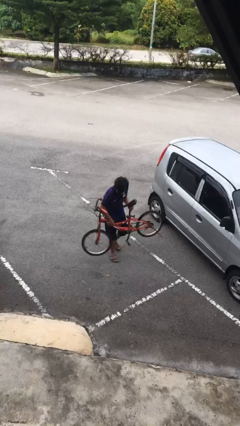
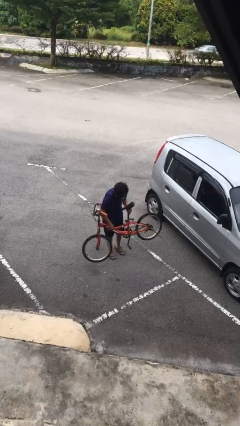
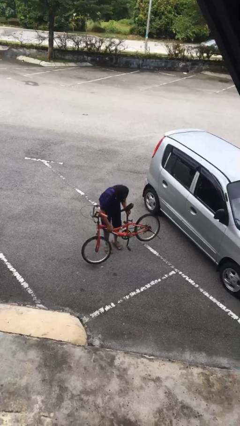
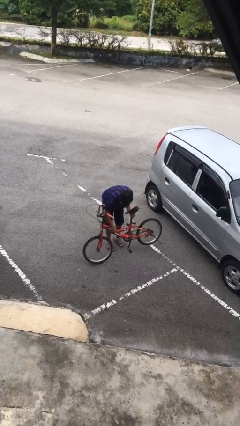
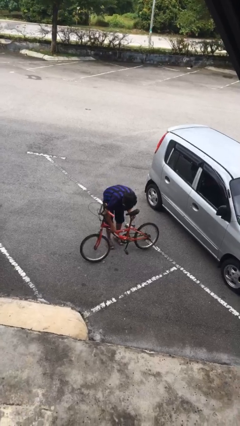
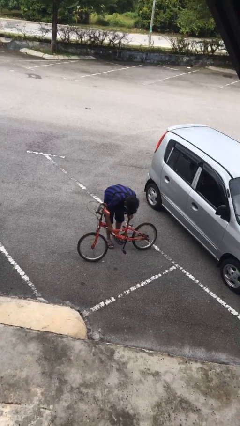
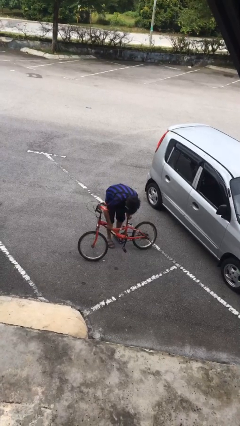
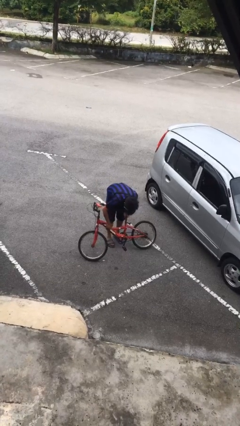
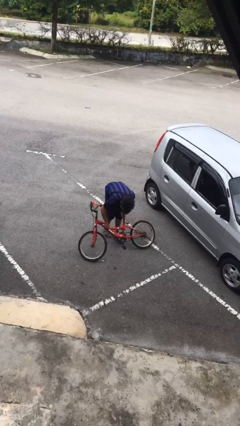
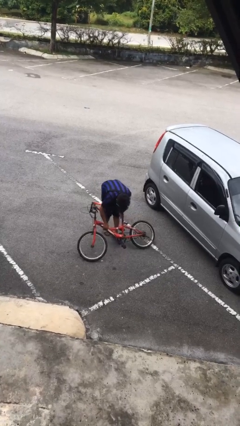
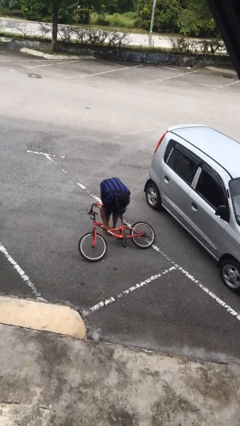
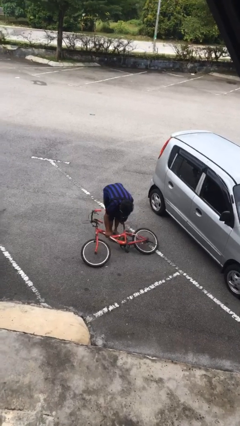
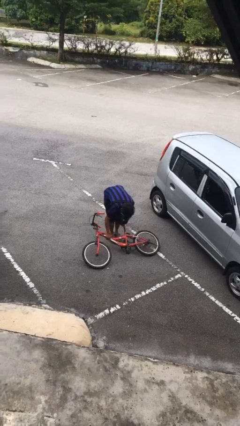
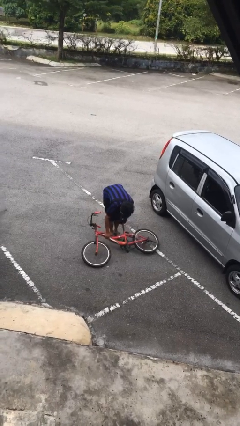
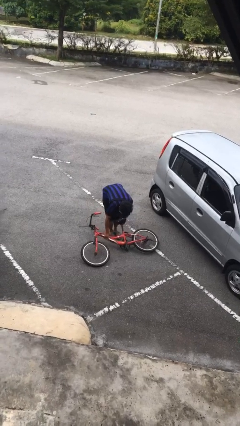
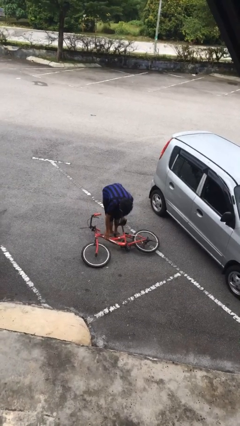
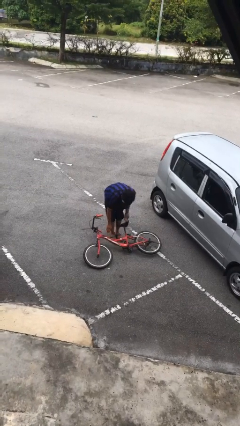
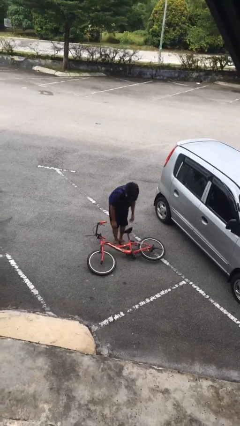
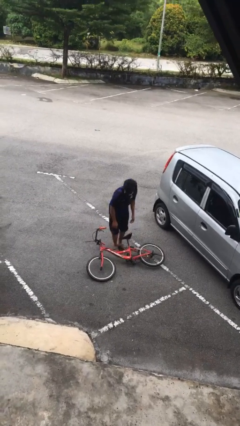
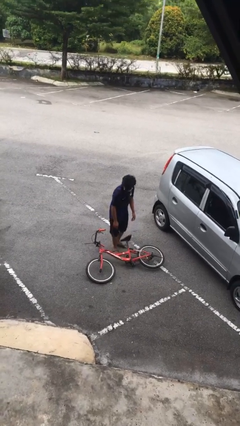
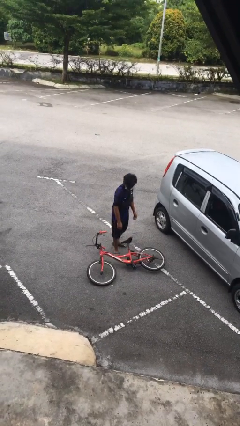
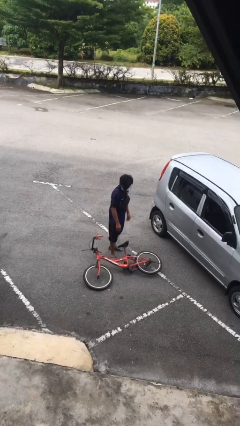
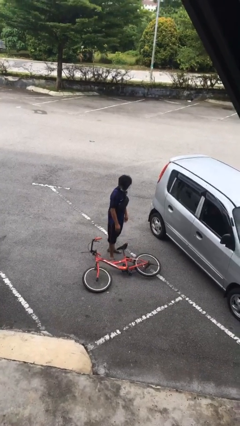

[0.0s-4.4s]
person puts down object on floor

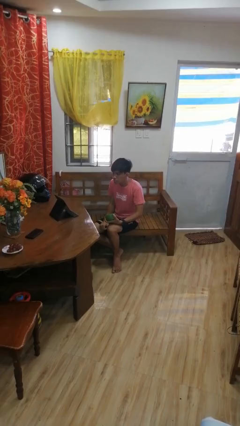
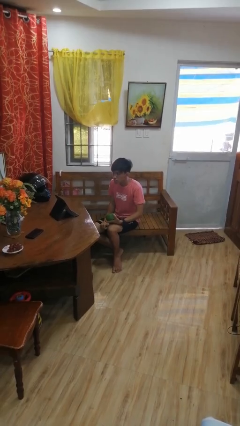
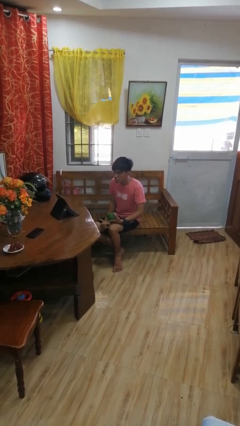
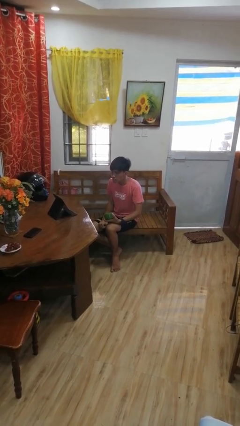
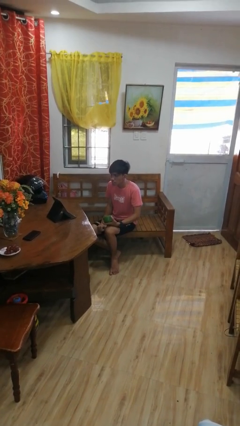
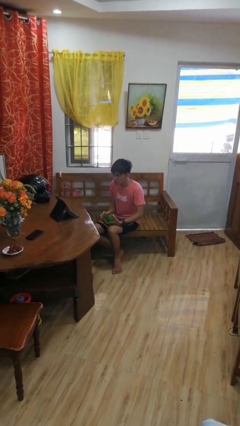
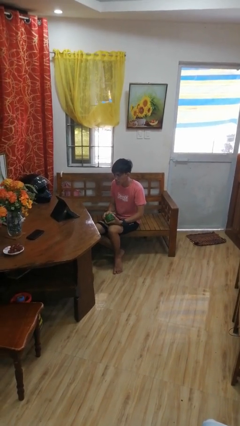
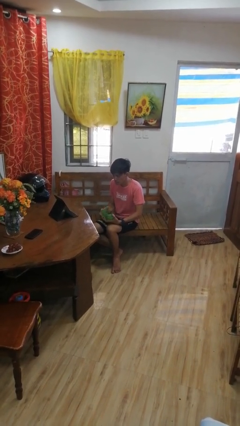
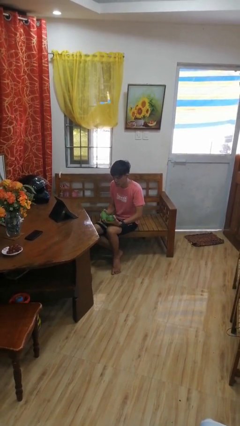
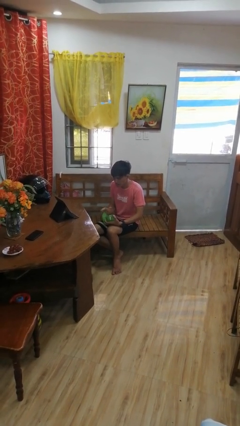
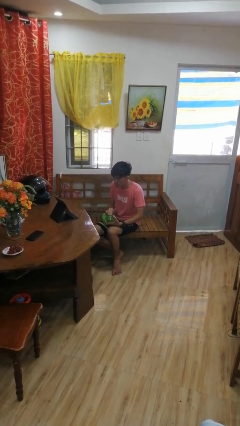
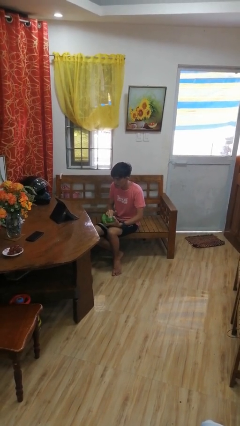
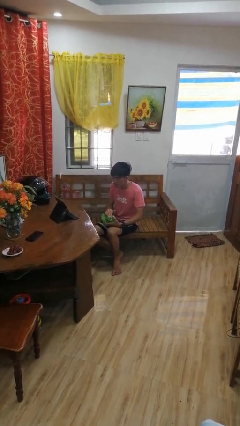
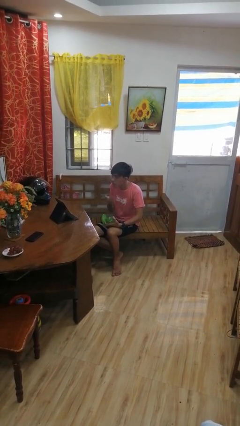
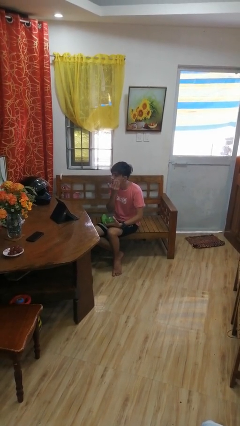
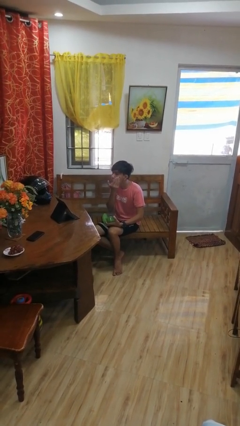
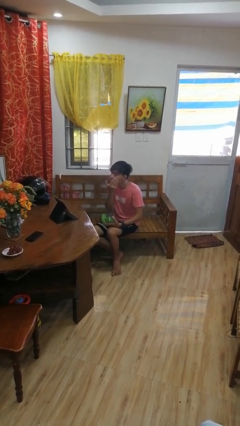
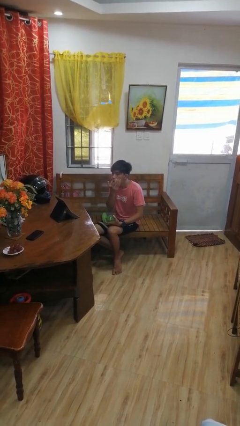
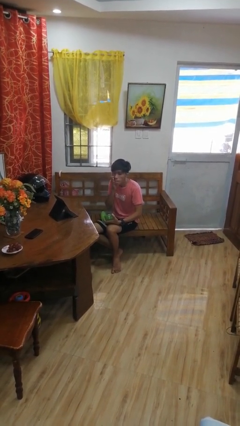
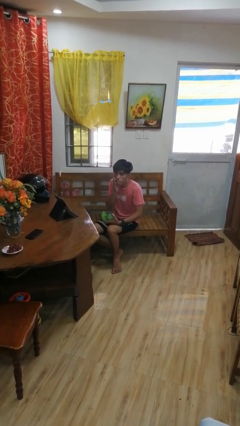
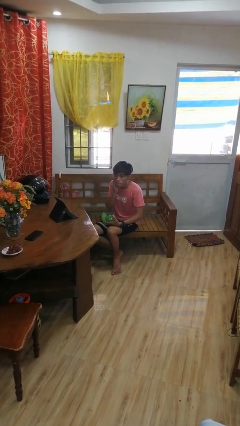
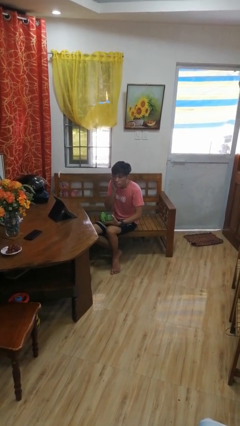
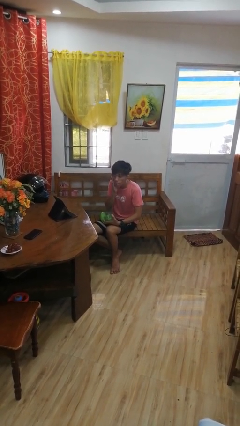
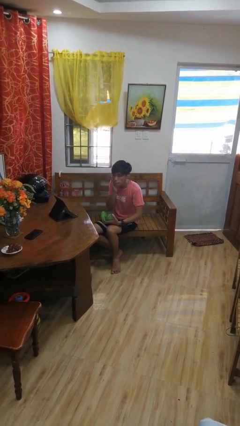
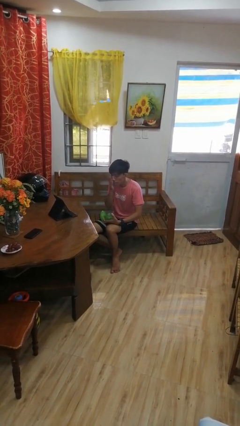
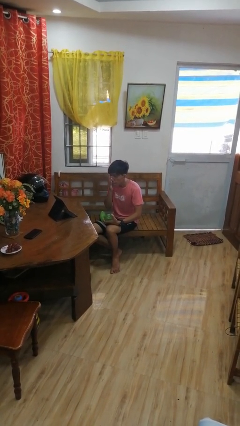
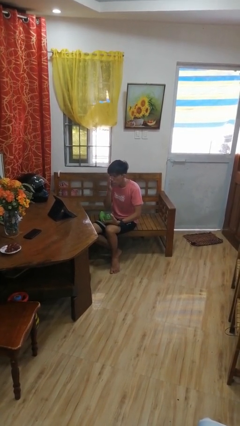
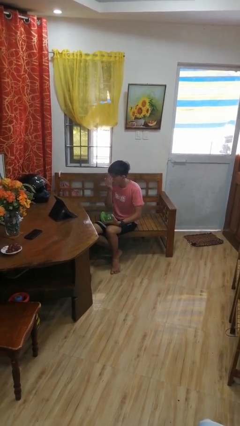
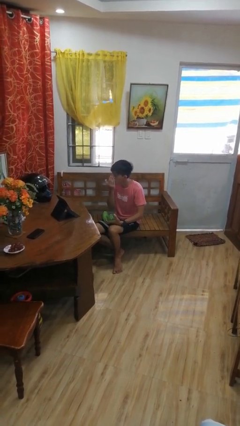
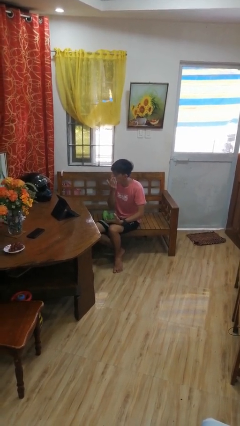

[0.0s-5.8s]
person applies facial moisturizer

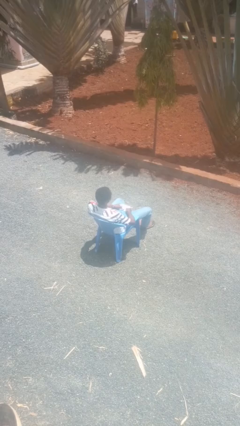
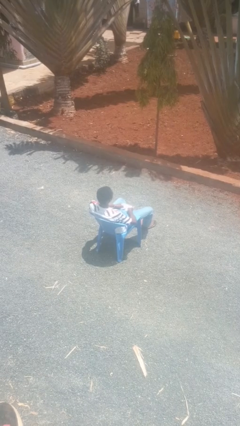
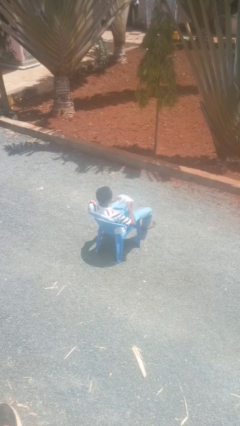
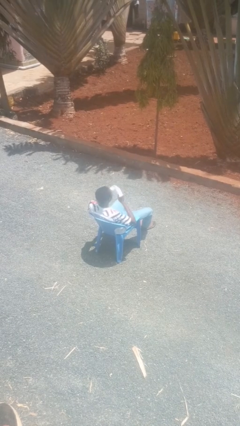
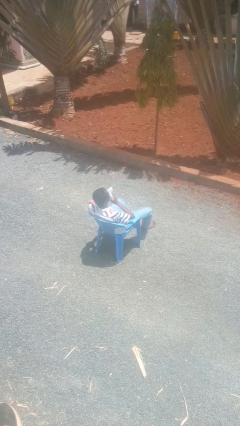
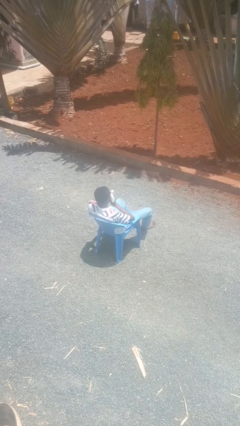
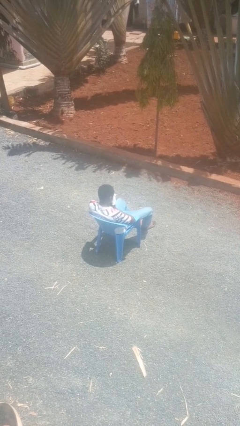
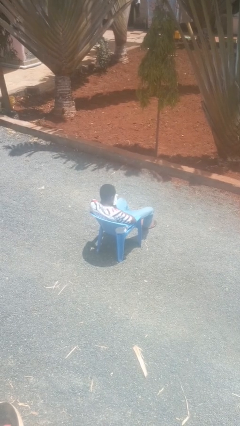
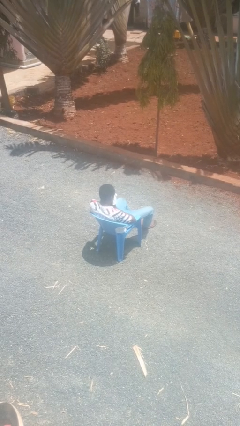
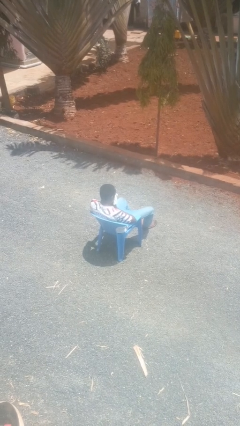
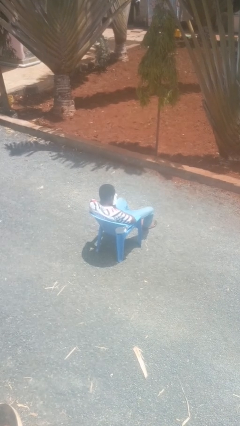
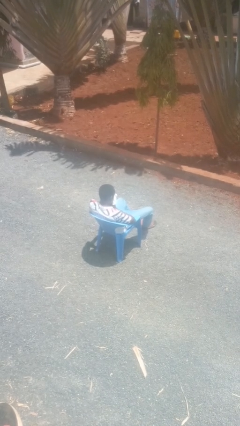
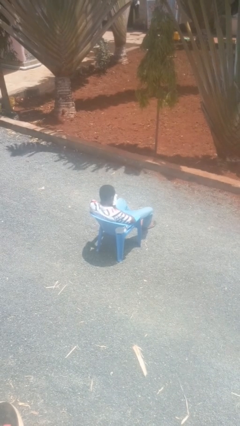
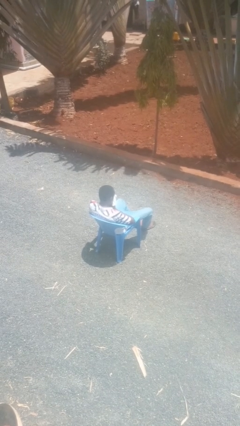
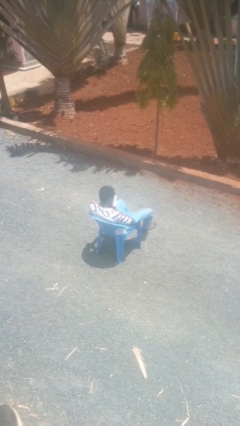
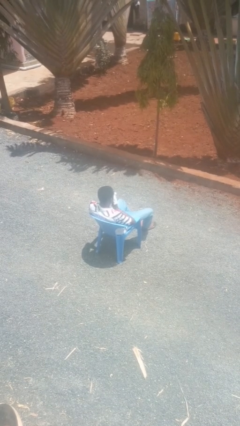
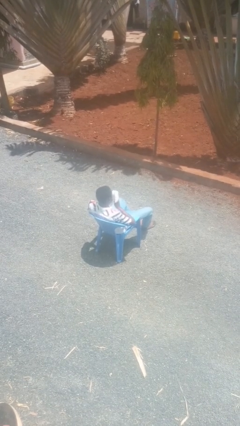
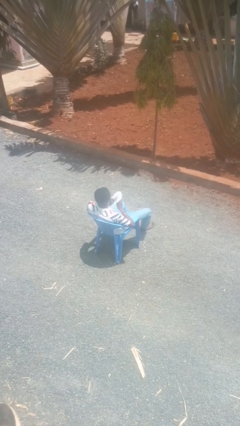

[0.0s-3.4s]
person blows nose

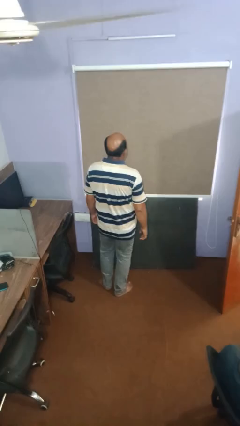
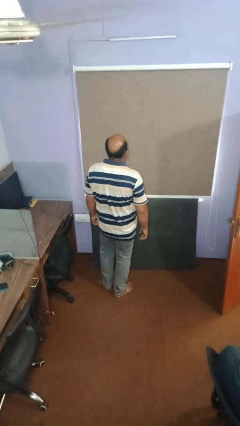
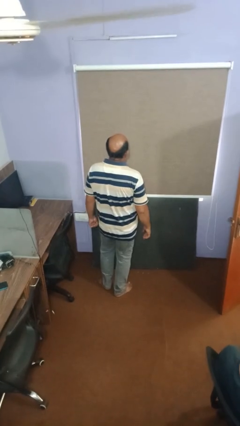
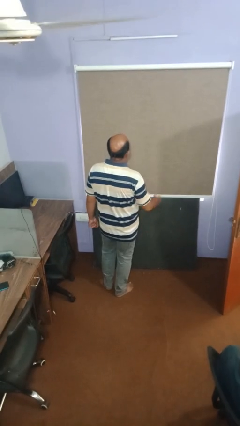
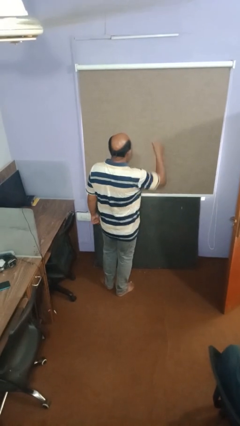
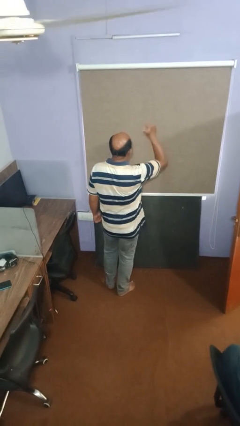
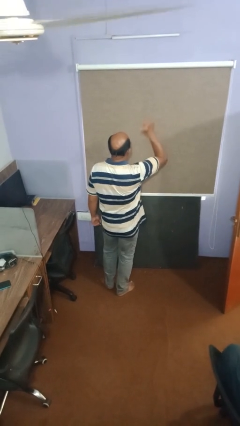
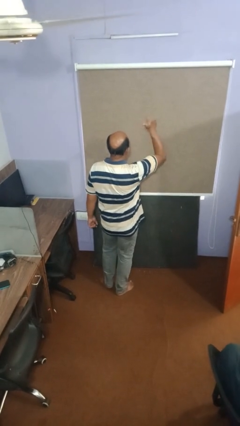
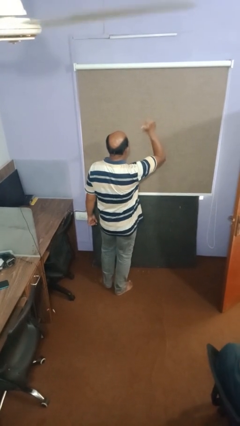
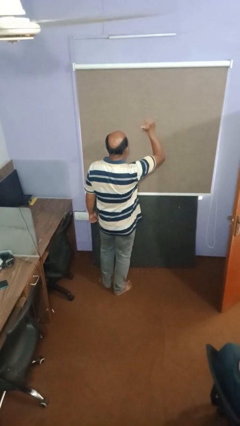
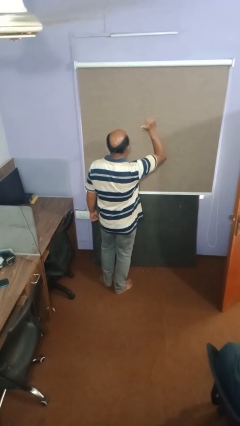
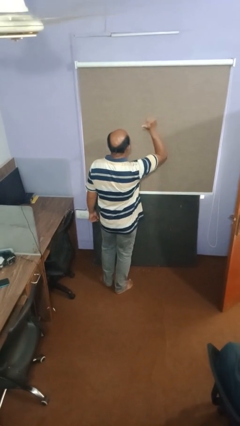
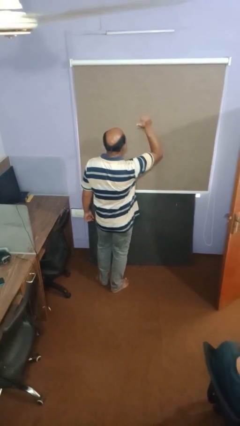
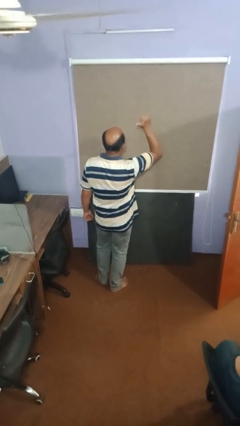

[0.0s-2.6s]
person gestures thumbs up

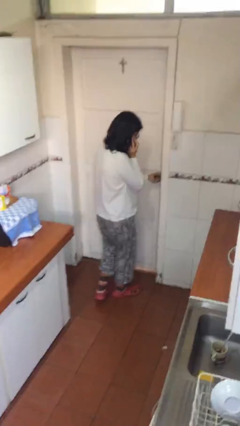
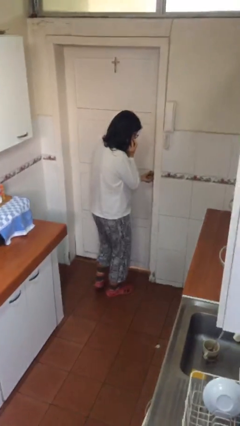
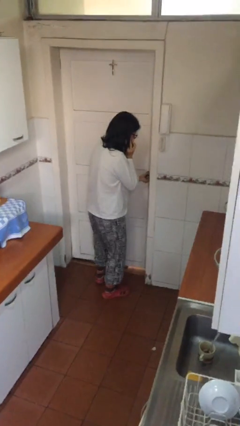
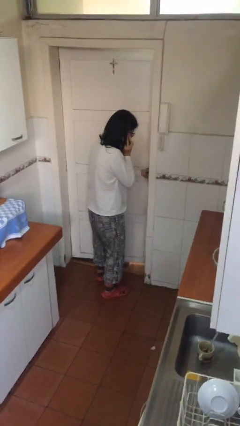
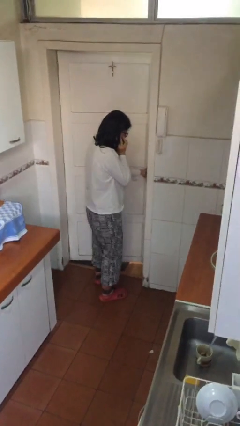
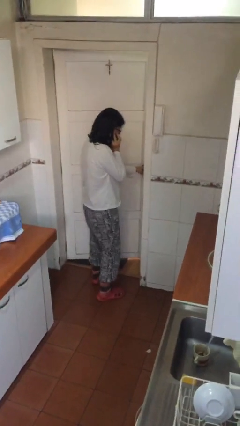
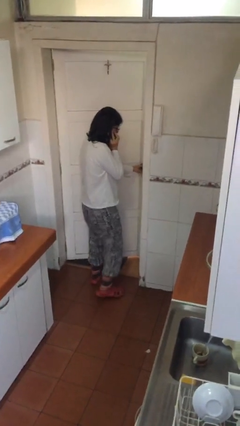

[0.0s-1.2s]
person opens facility door
